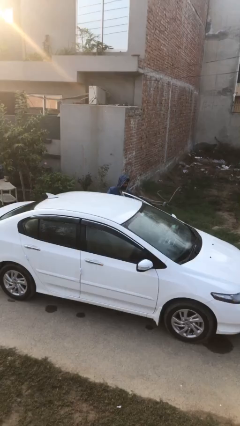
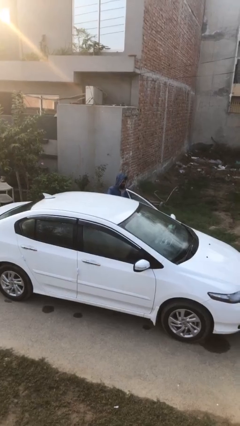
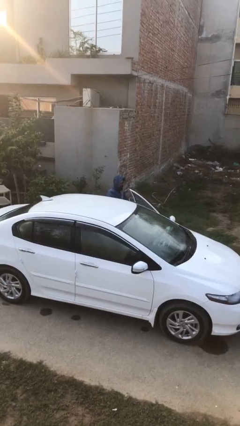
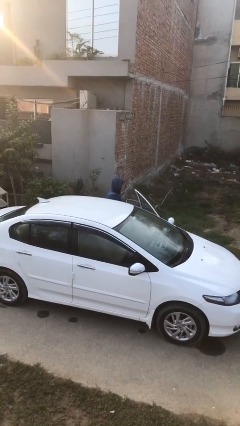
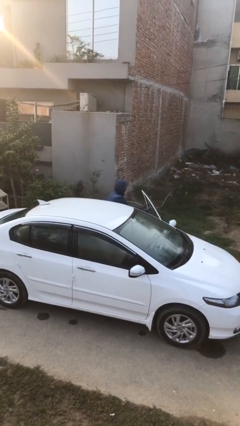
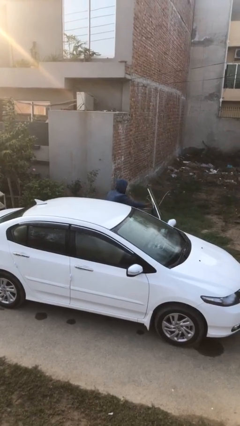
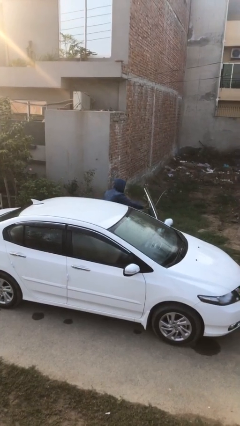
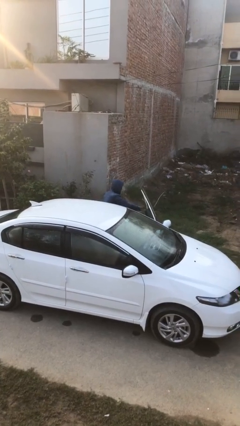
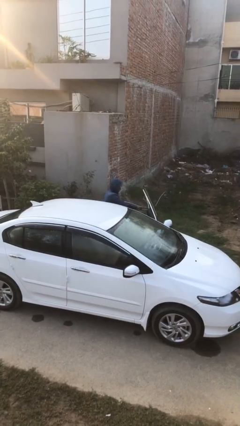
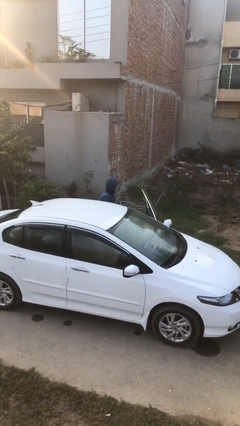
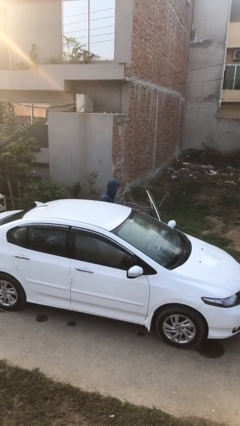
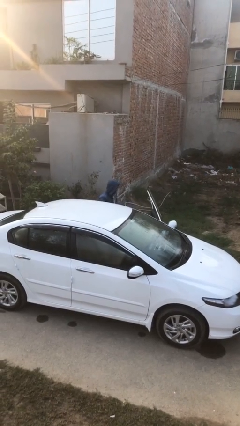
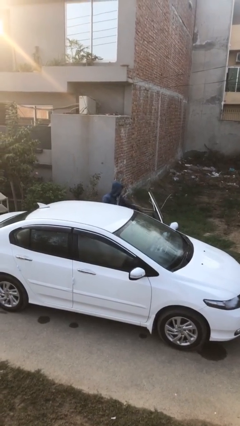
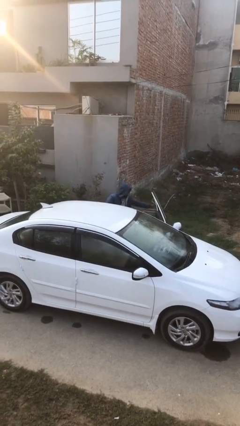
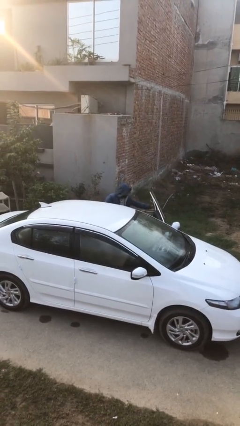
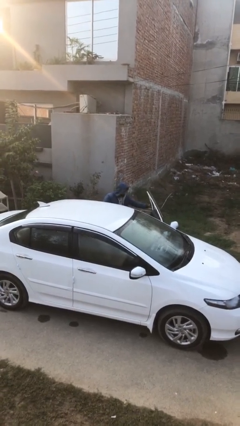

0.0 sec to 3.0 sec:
person opens car door

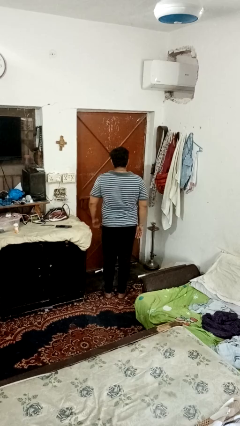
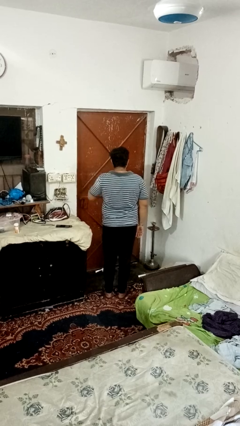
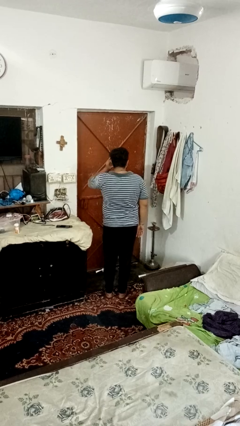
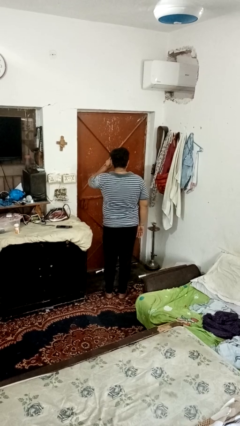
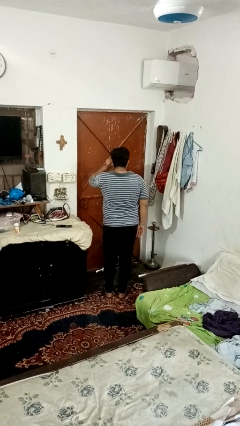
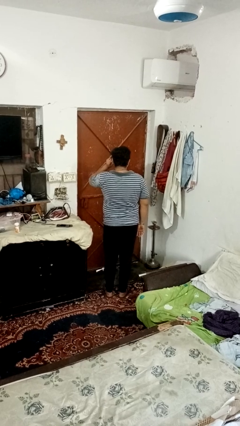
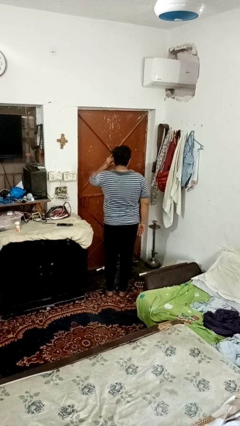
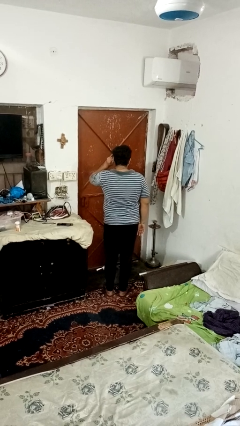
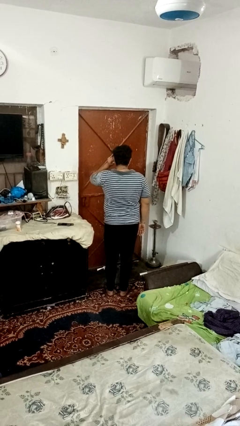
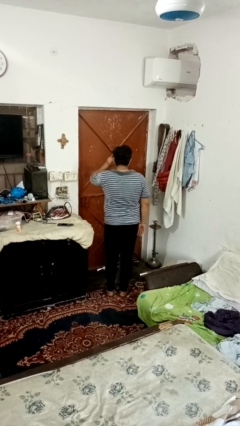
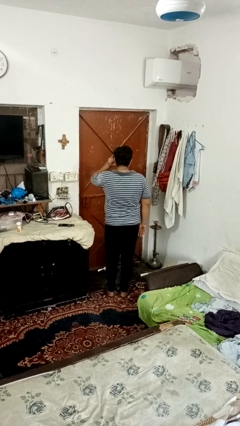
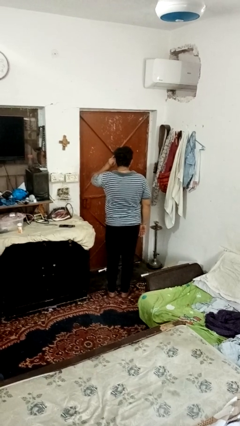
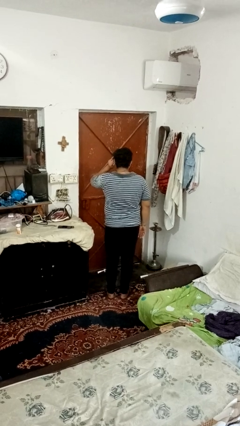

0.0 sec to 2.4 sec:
person touches earlobe

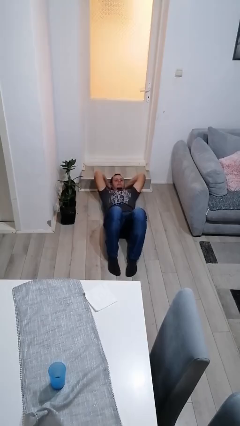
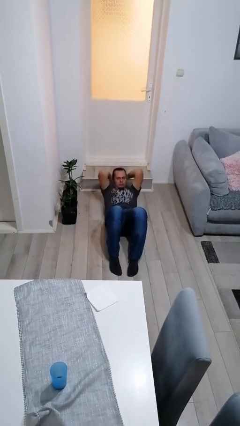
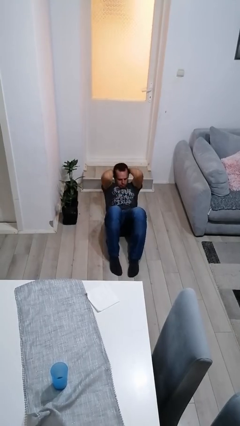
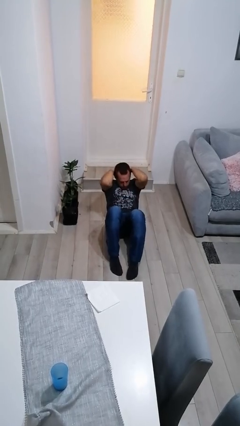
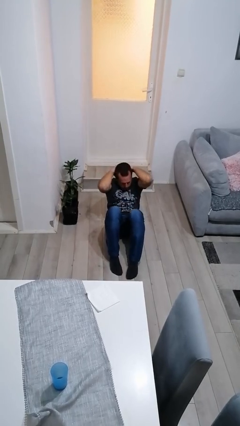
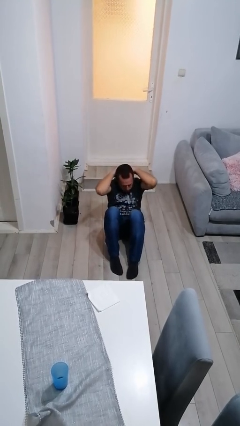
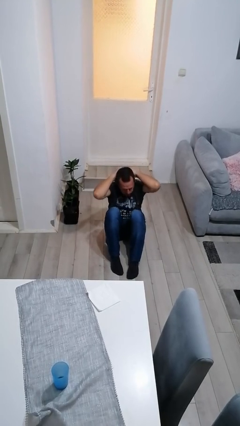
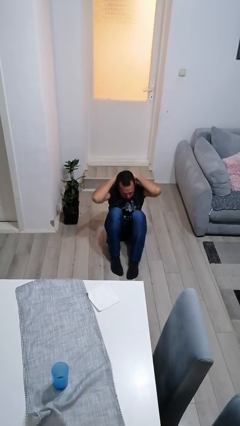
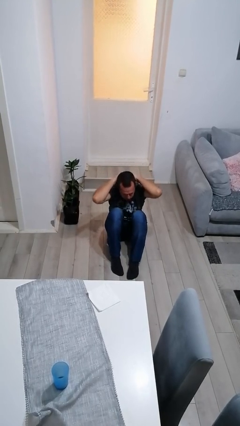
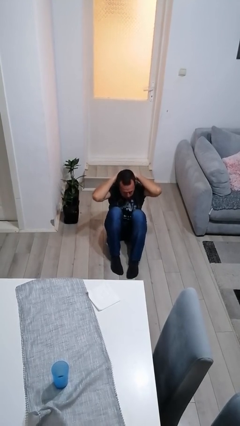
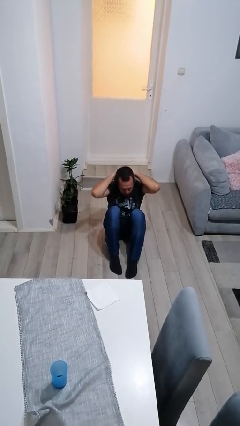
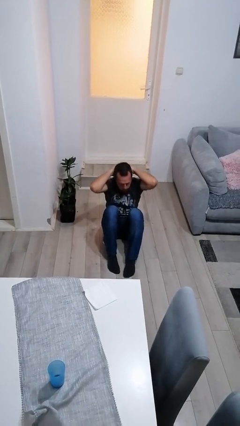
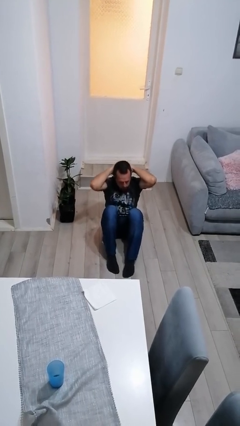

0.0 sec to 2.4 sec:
person exercises with situp

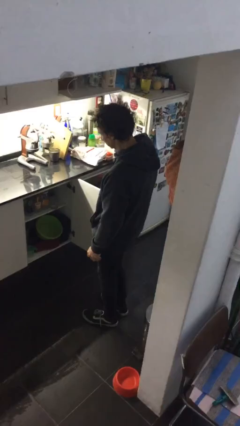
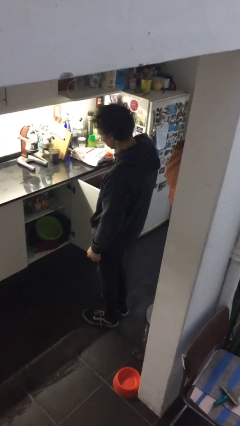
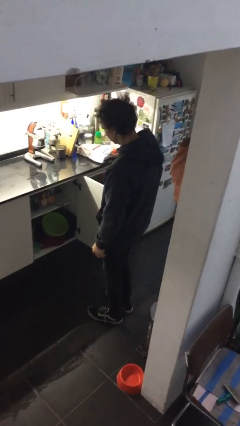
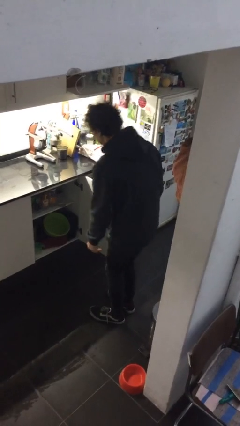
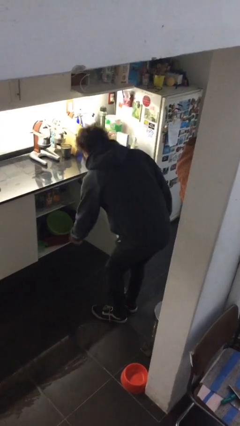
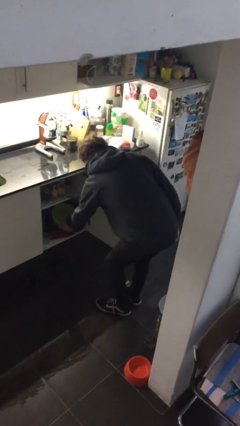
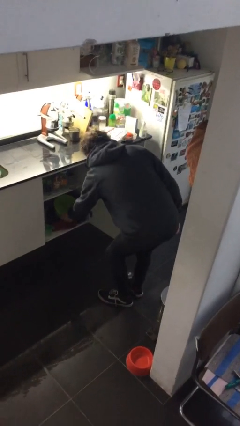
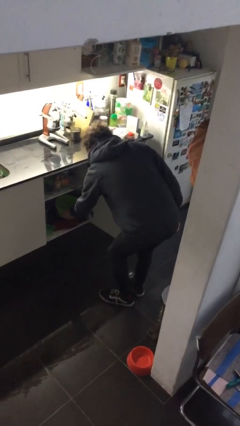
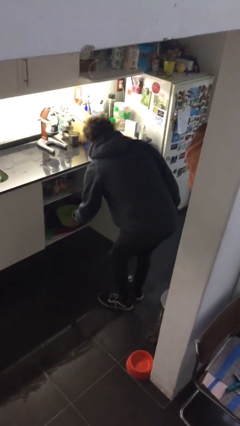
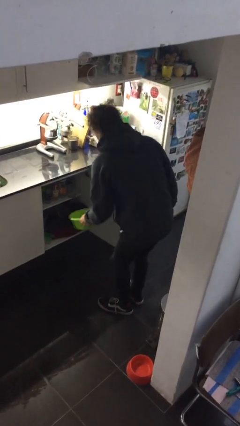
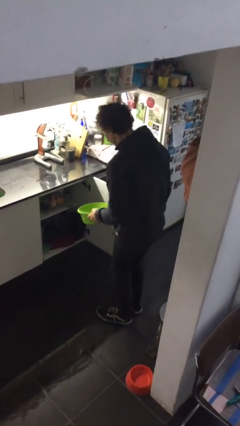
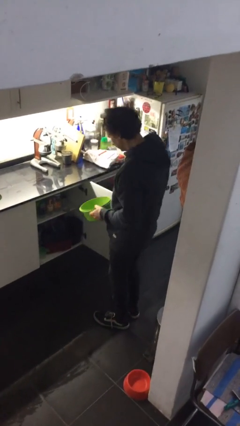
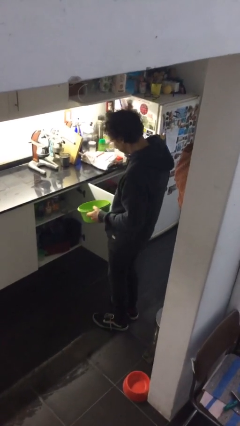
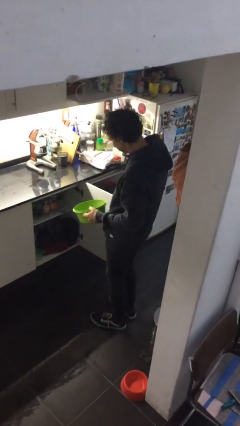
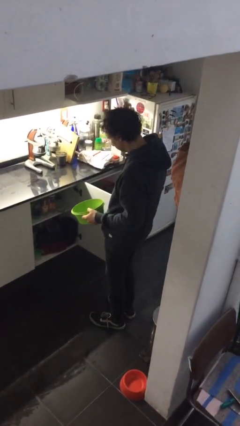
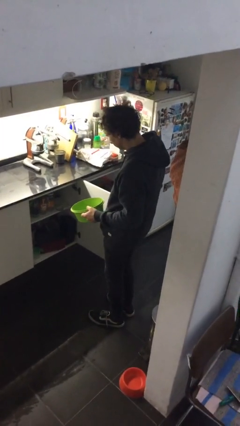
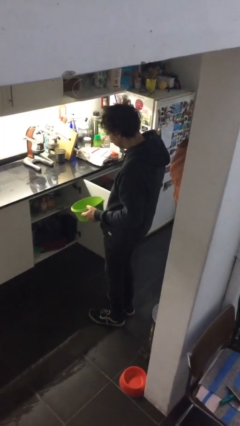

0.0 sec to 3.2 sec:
person picks up object from cabinet

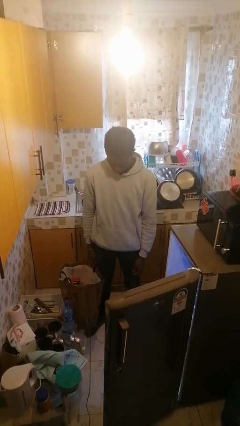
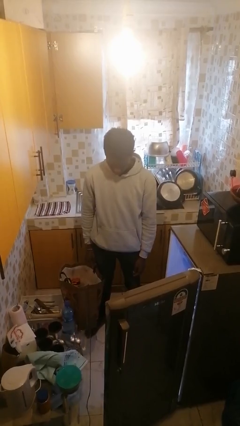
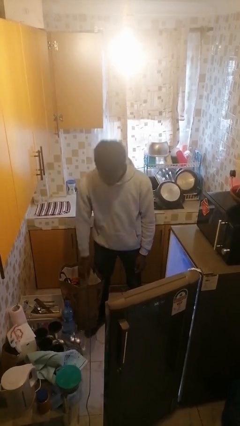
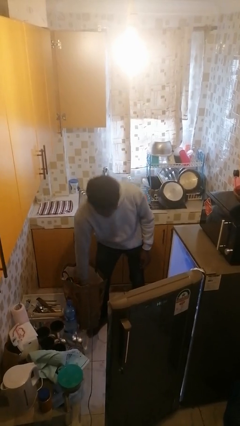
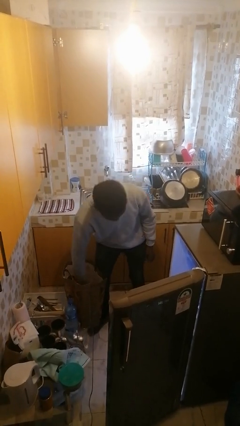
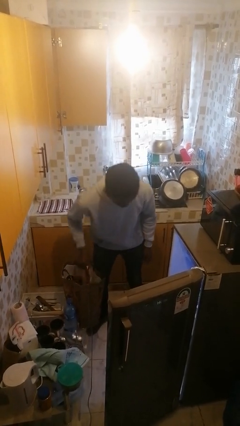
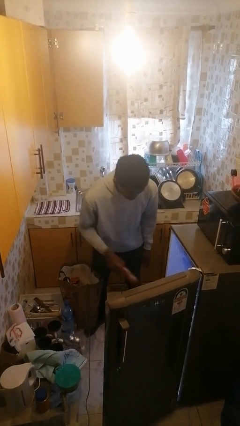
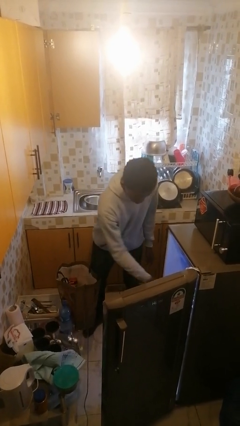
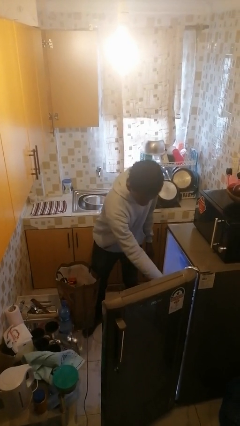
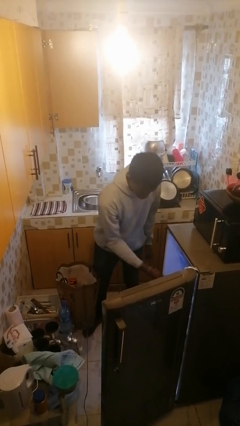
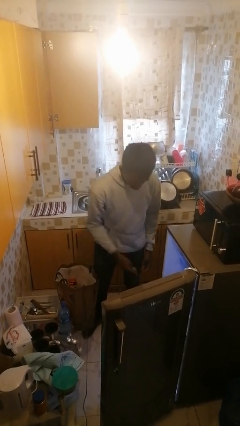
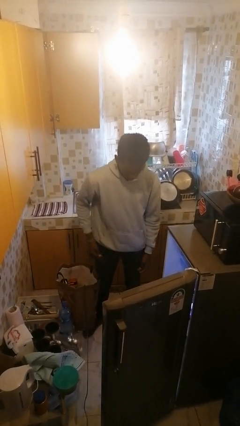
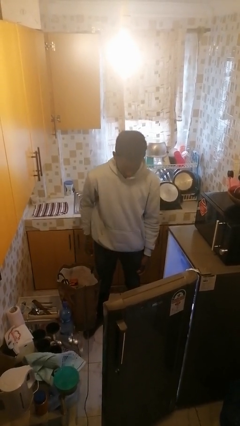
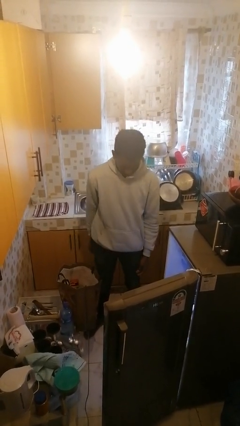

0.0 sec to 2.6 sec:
person loads groceries into refrigerator

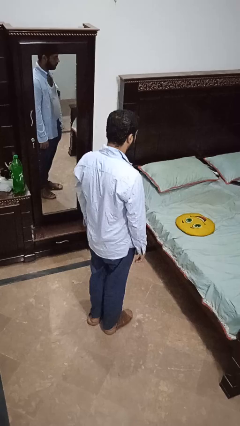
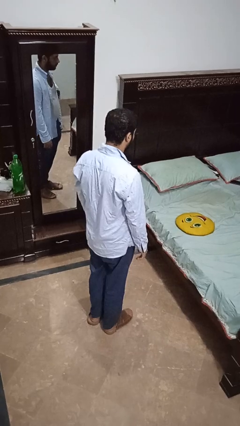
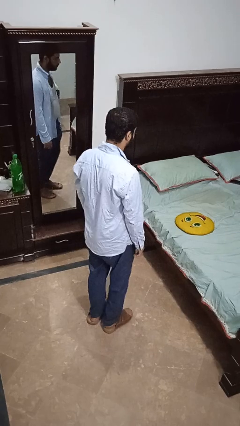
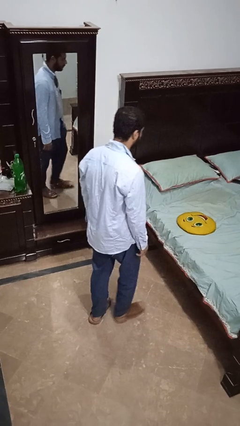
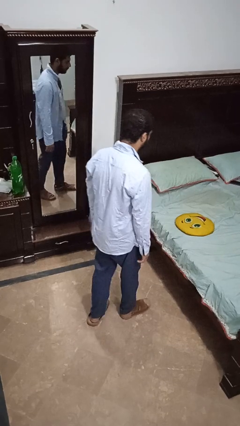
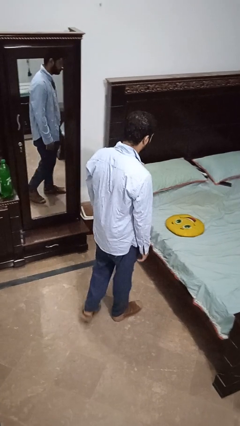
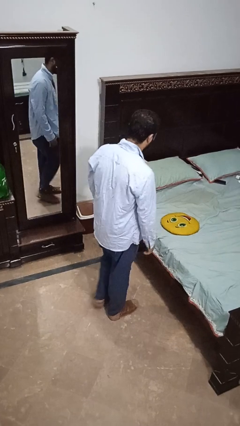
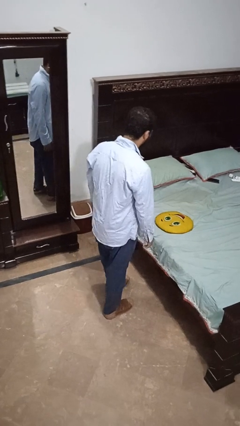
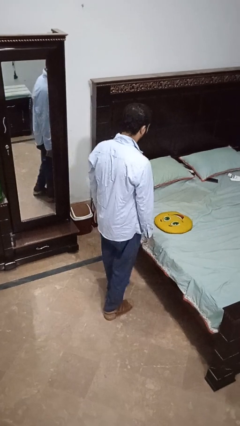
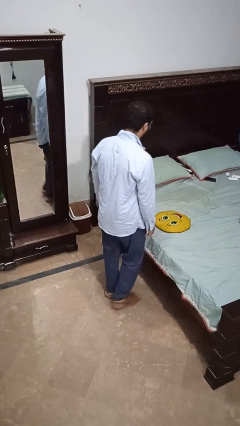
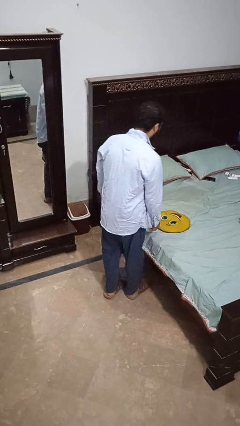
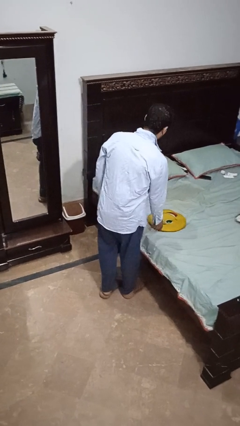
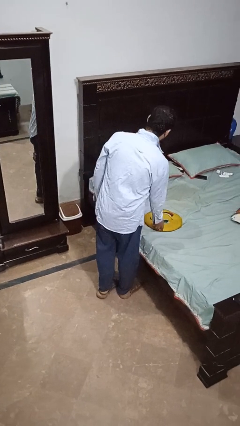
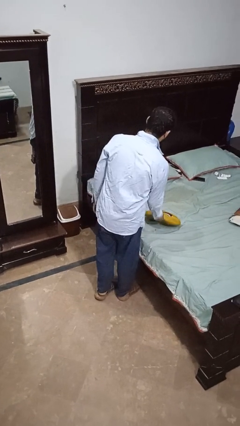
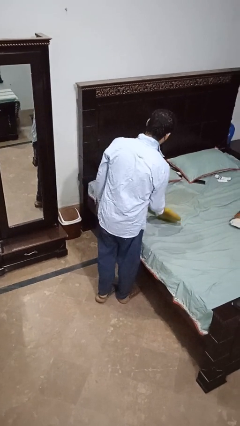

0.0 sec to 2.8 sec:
person picks up object from bed

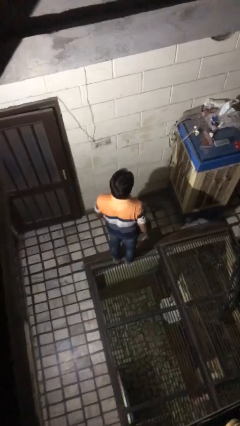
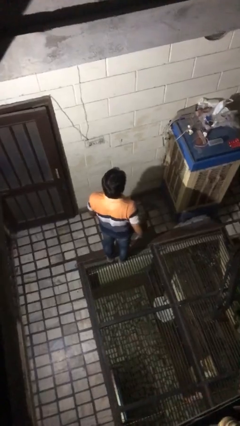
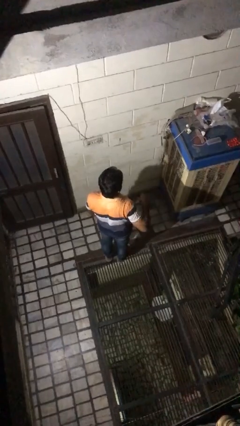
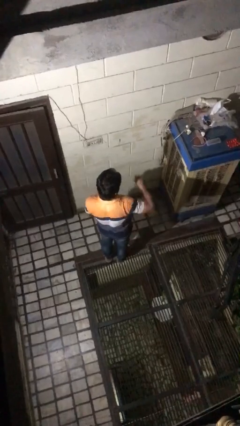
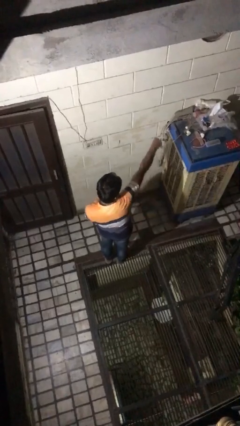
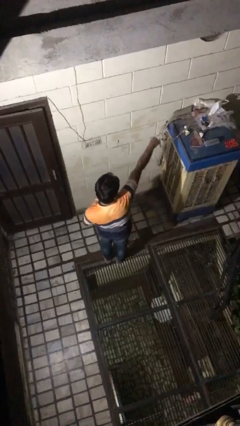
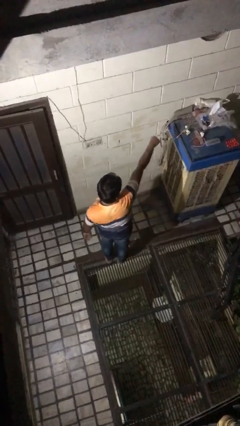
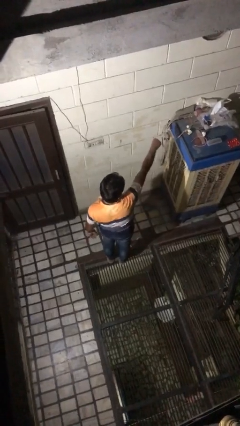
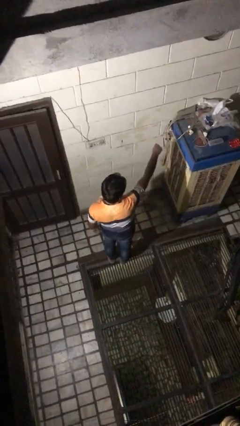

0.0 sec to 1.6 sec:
person punches
